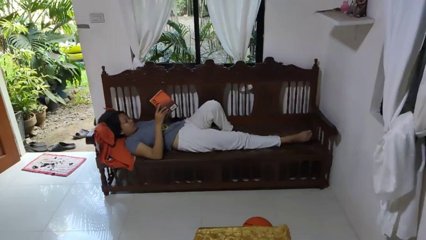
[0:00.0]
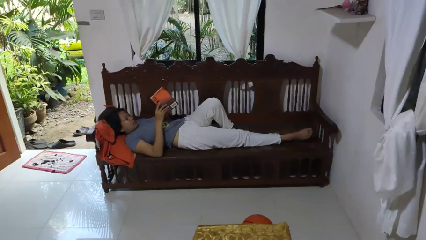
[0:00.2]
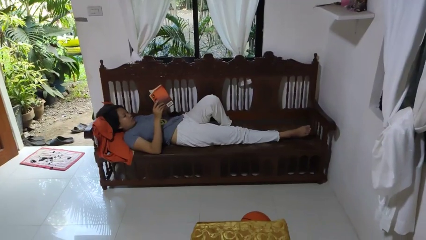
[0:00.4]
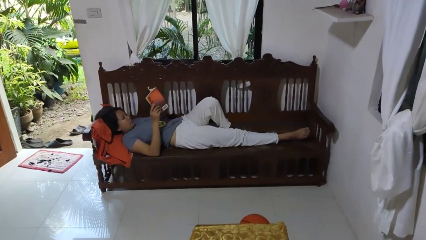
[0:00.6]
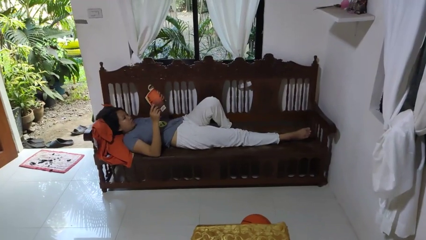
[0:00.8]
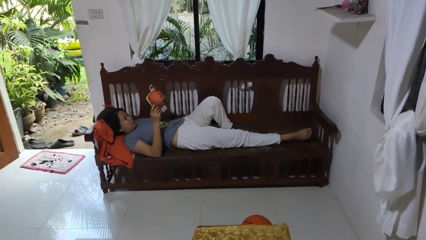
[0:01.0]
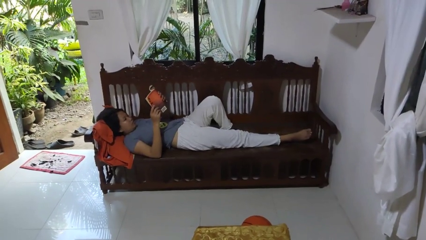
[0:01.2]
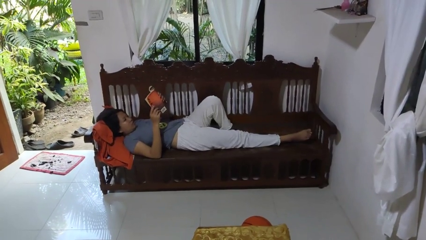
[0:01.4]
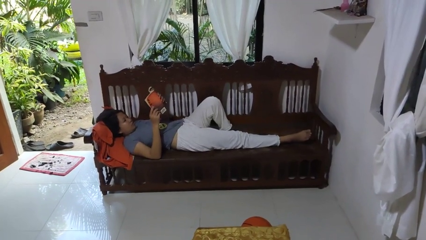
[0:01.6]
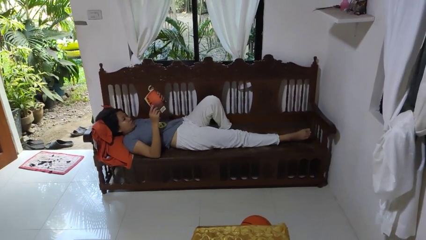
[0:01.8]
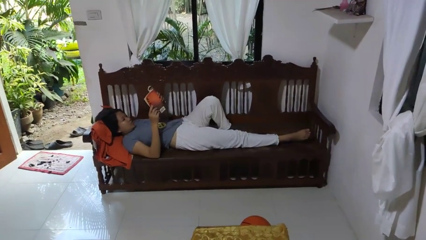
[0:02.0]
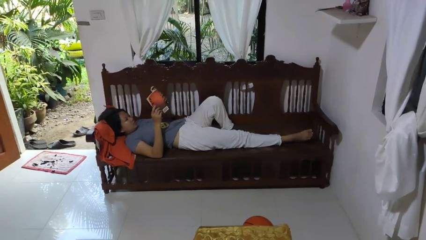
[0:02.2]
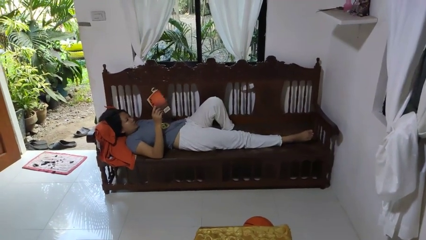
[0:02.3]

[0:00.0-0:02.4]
person reads book

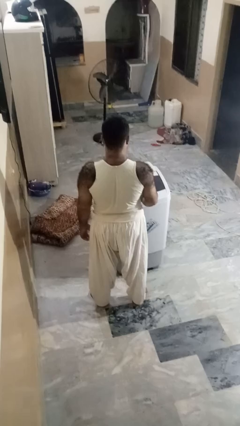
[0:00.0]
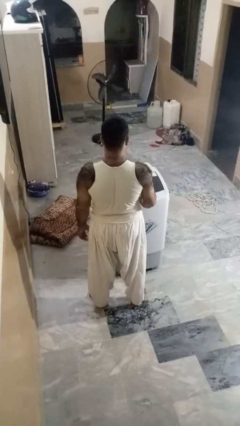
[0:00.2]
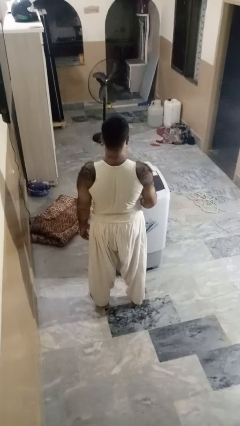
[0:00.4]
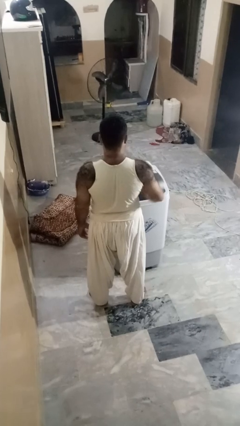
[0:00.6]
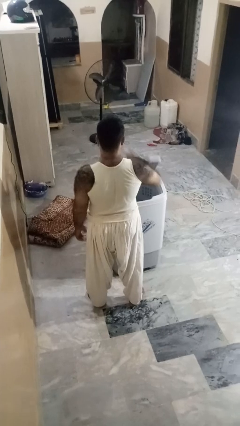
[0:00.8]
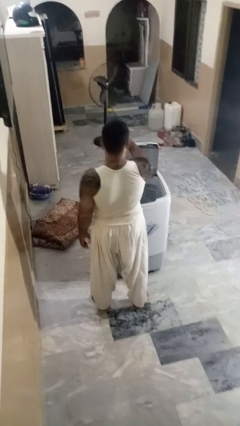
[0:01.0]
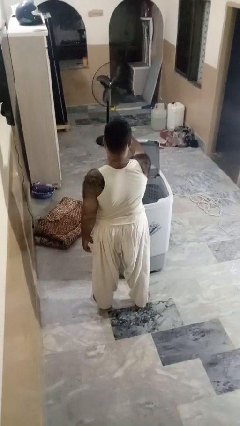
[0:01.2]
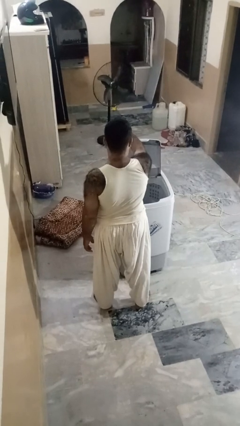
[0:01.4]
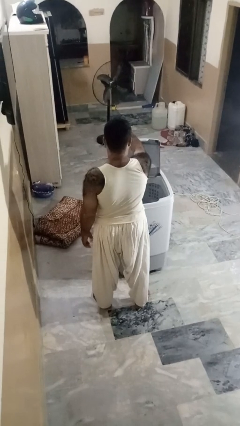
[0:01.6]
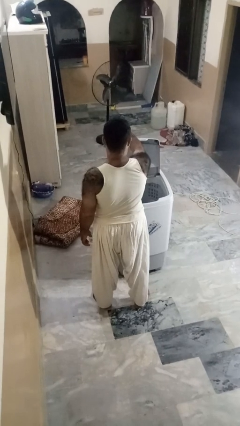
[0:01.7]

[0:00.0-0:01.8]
person opens clothes washer

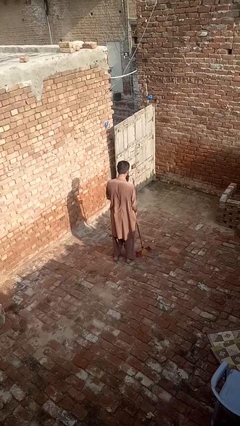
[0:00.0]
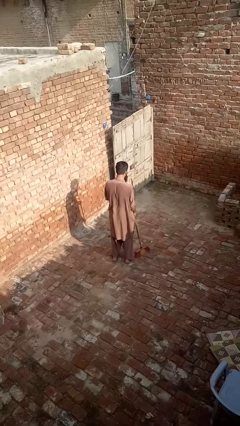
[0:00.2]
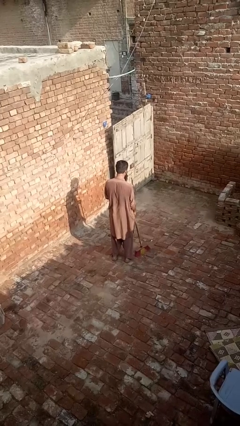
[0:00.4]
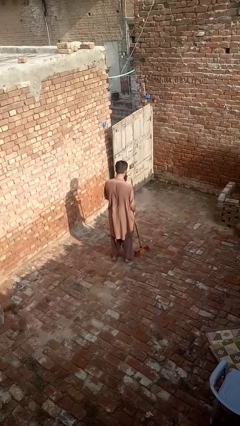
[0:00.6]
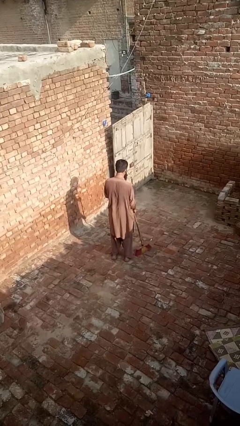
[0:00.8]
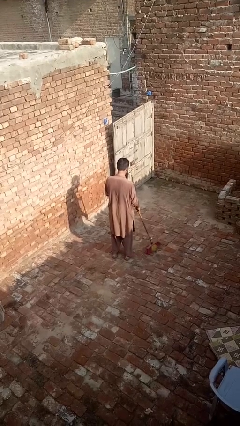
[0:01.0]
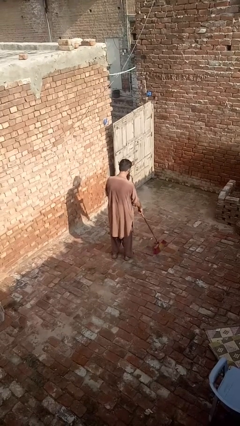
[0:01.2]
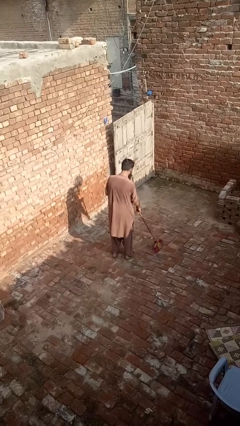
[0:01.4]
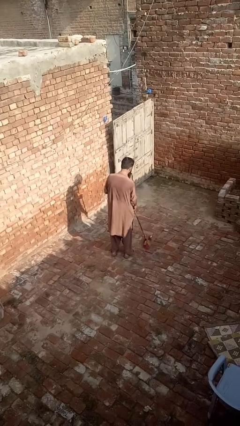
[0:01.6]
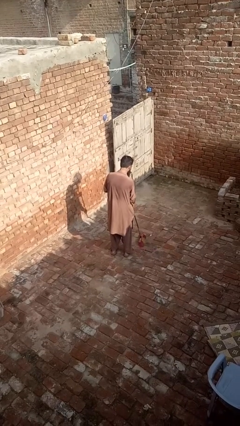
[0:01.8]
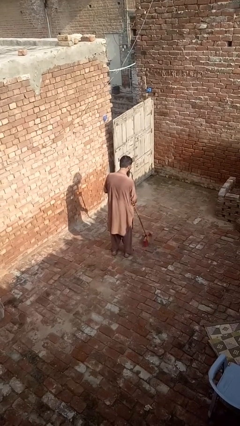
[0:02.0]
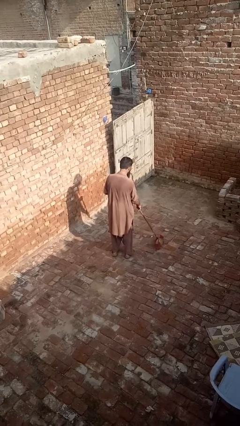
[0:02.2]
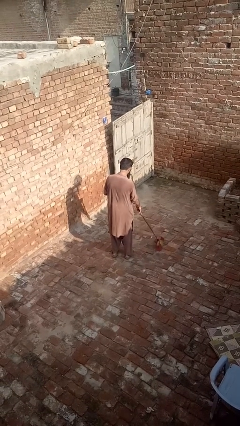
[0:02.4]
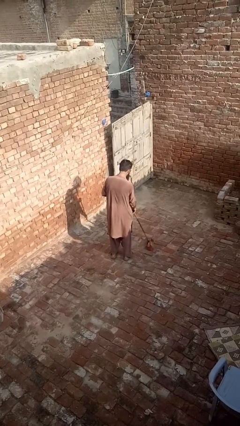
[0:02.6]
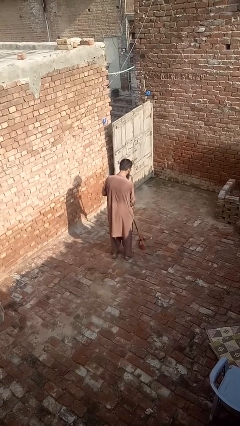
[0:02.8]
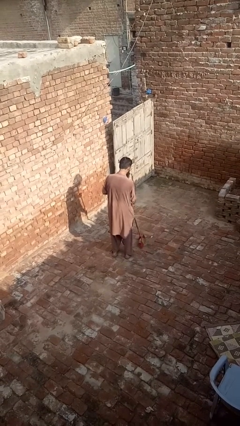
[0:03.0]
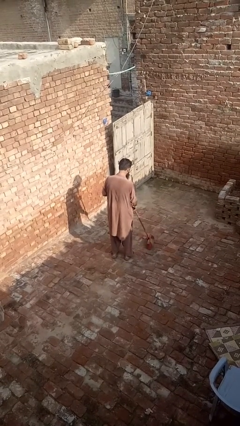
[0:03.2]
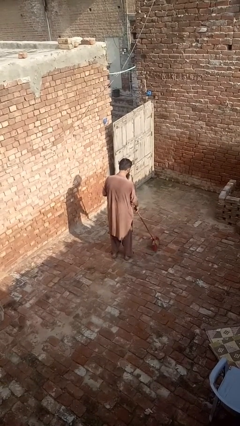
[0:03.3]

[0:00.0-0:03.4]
person sweeps floor

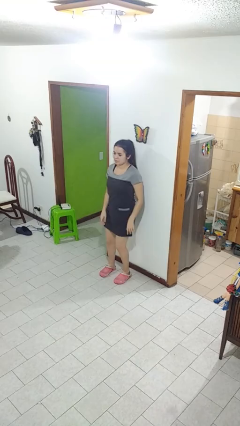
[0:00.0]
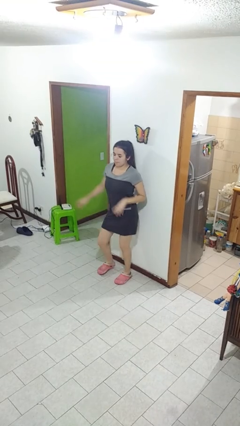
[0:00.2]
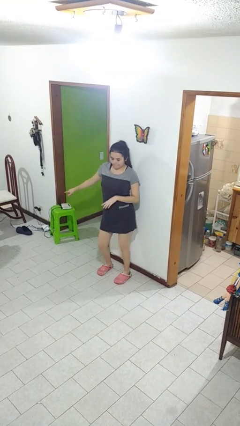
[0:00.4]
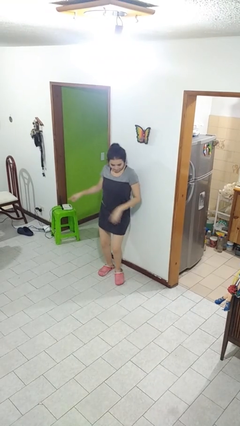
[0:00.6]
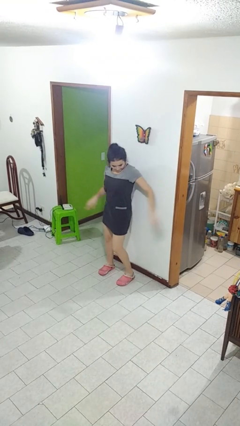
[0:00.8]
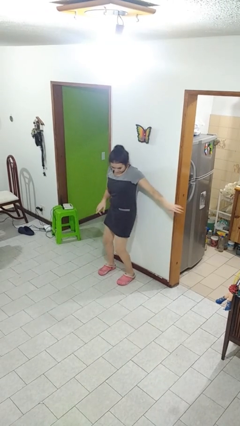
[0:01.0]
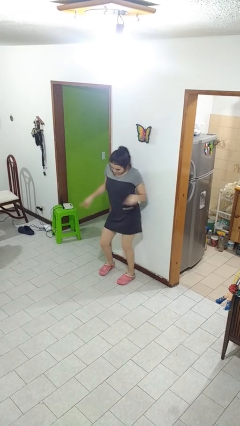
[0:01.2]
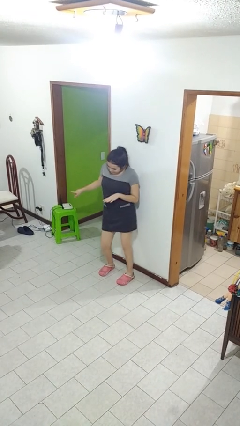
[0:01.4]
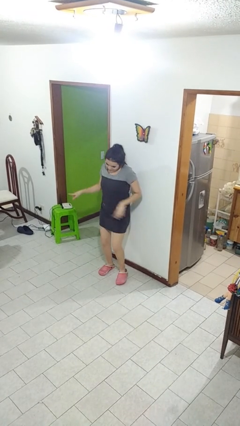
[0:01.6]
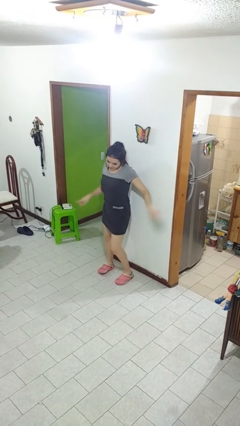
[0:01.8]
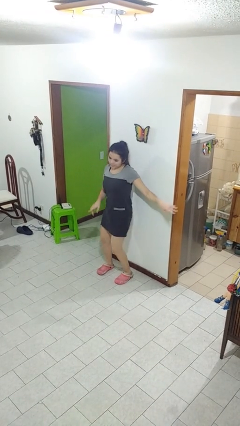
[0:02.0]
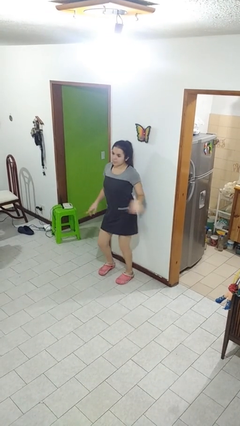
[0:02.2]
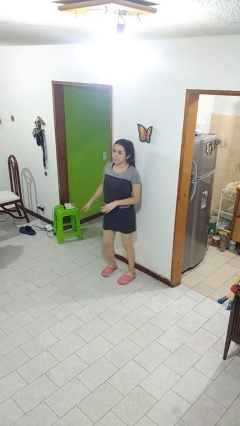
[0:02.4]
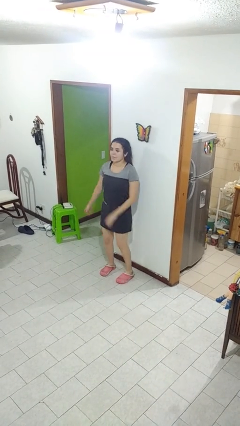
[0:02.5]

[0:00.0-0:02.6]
person dances in place

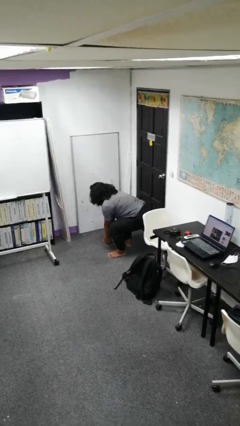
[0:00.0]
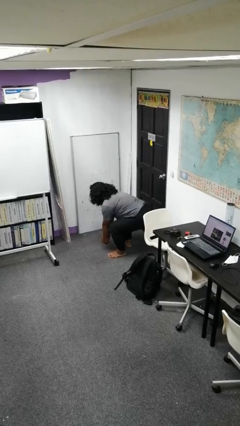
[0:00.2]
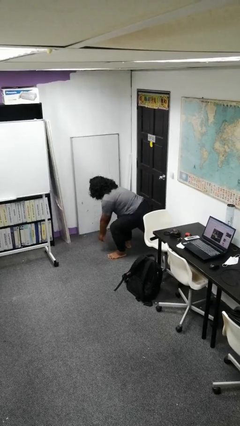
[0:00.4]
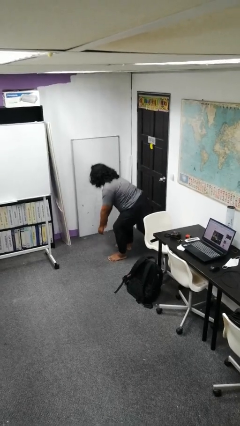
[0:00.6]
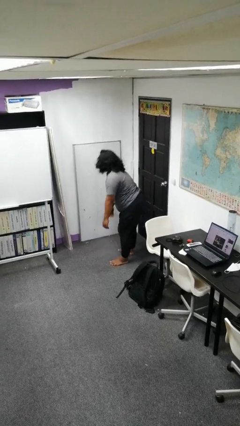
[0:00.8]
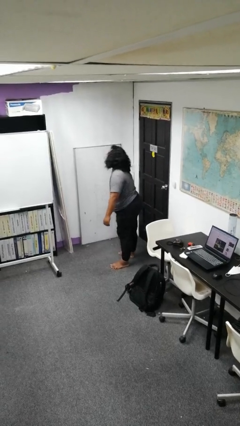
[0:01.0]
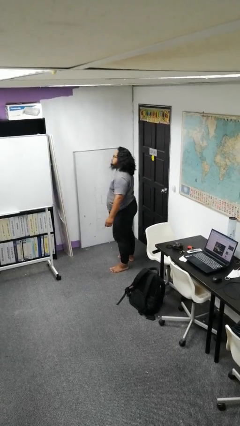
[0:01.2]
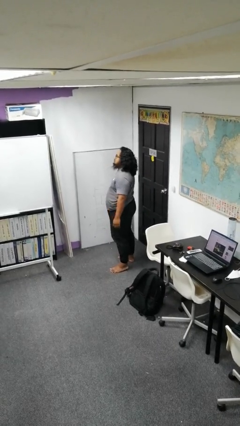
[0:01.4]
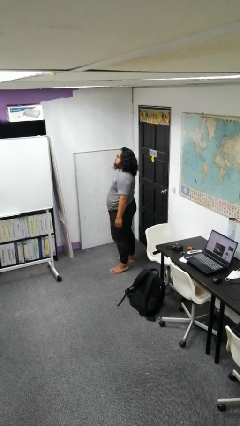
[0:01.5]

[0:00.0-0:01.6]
person stands up

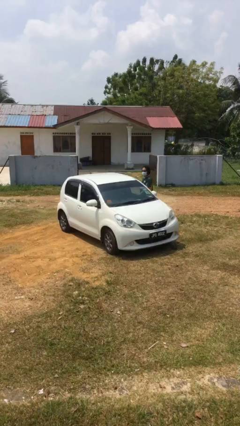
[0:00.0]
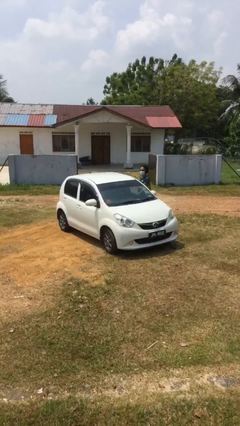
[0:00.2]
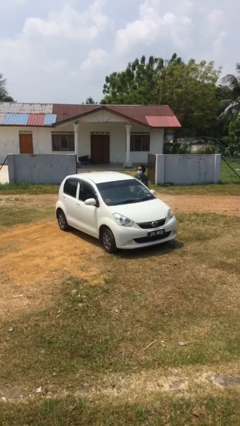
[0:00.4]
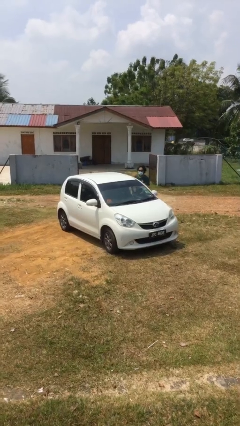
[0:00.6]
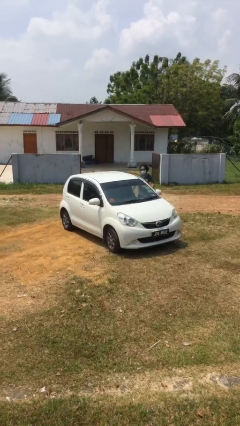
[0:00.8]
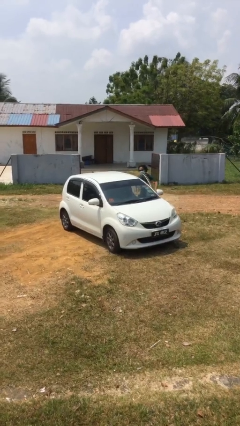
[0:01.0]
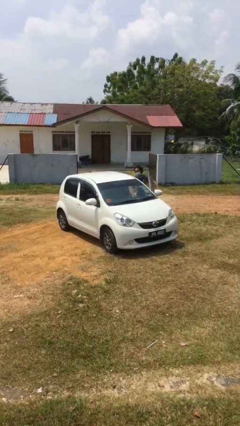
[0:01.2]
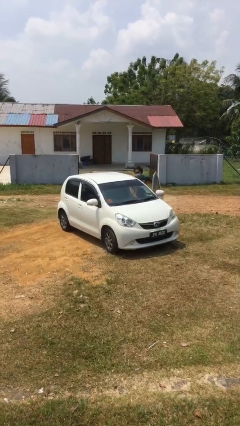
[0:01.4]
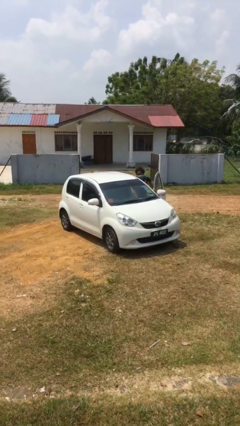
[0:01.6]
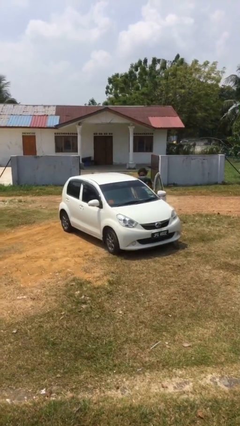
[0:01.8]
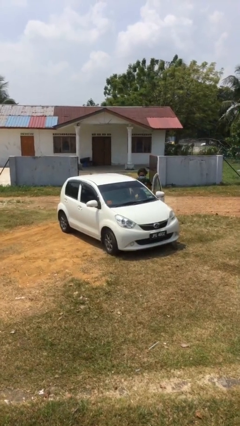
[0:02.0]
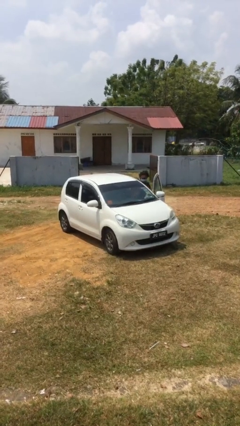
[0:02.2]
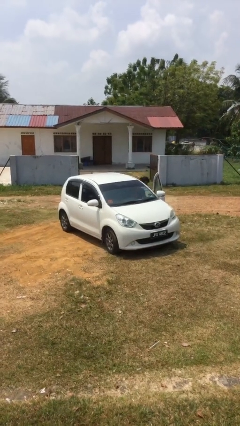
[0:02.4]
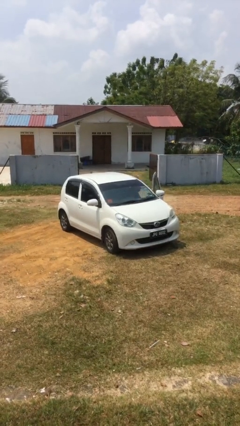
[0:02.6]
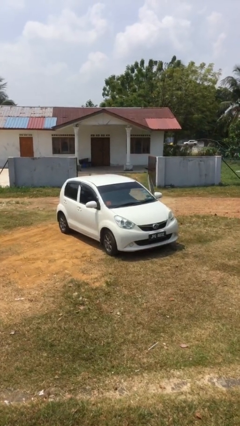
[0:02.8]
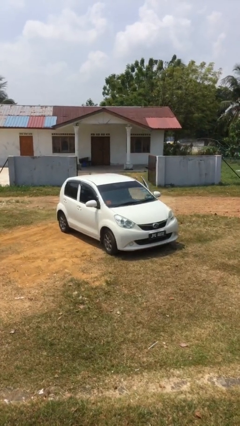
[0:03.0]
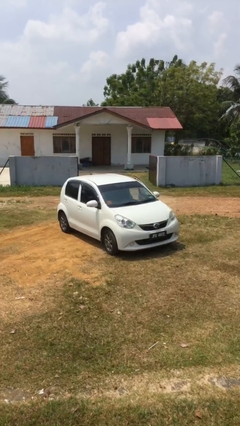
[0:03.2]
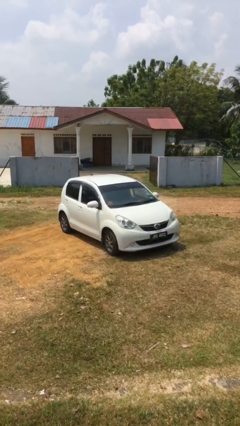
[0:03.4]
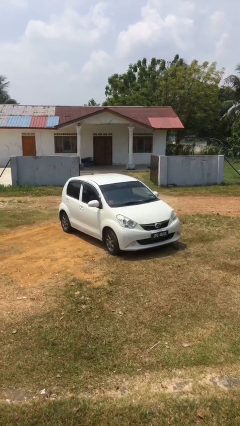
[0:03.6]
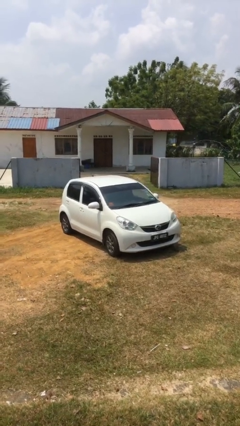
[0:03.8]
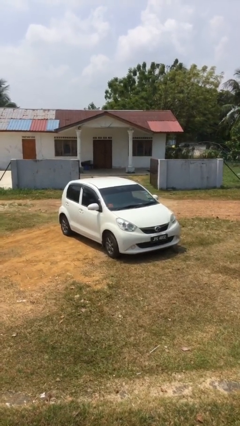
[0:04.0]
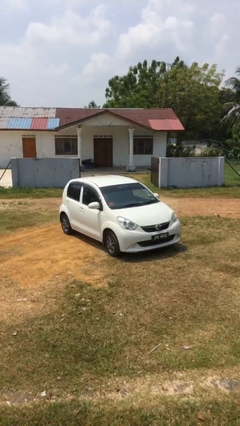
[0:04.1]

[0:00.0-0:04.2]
car picks up person

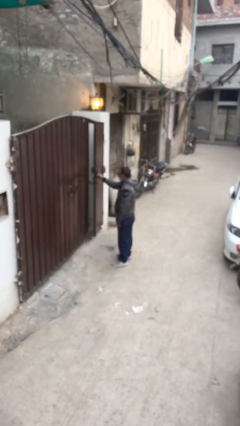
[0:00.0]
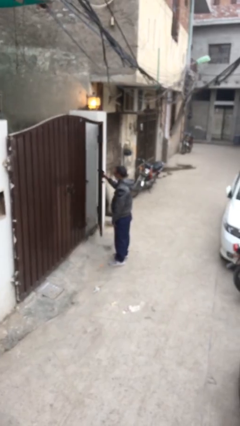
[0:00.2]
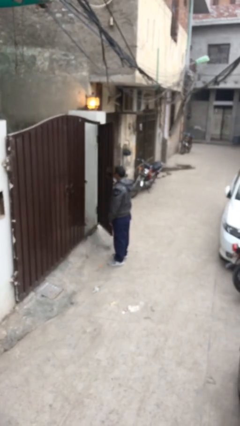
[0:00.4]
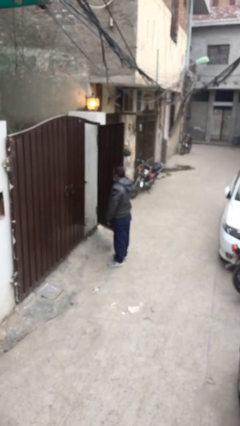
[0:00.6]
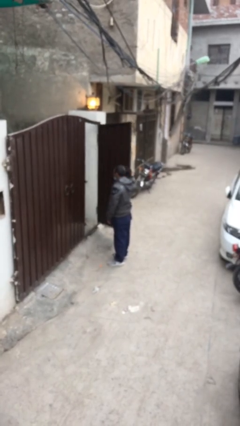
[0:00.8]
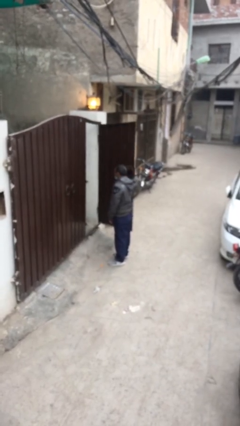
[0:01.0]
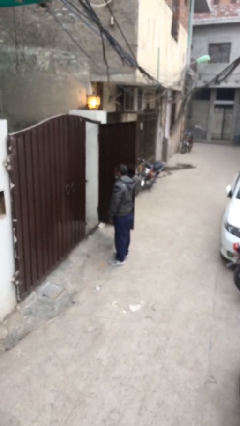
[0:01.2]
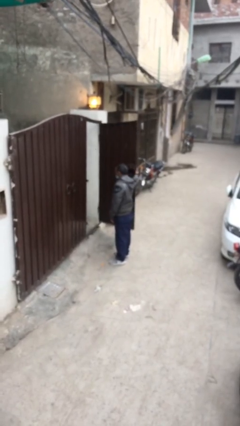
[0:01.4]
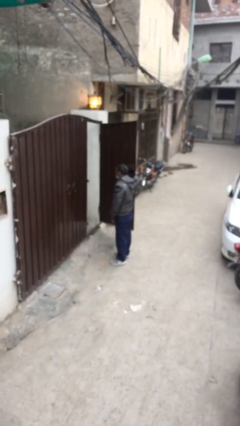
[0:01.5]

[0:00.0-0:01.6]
person opens facility door
